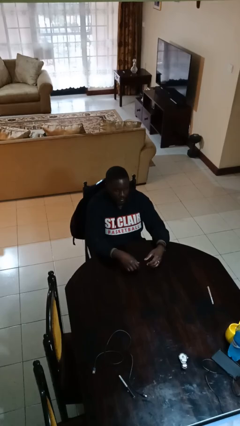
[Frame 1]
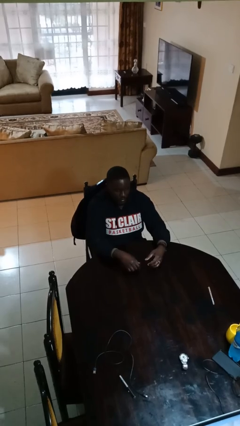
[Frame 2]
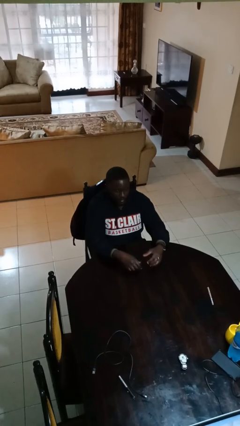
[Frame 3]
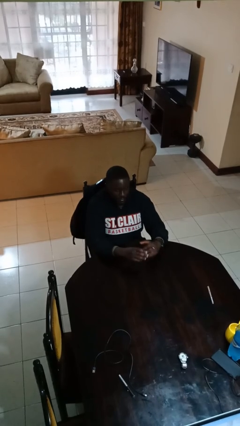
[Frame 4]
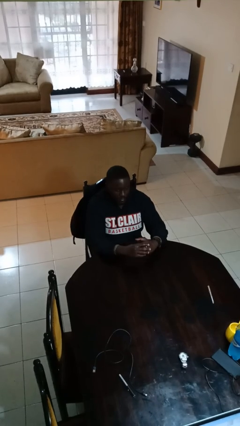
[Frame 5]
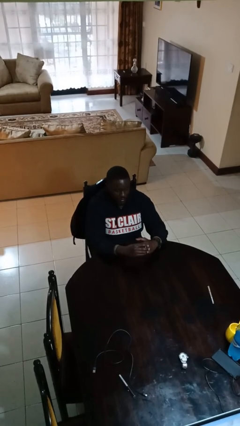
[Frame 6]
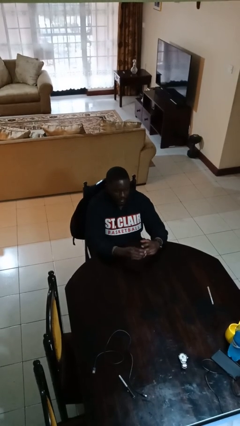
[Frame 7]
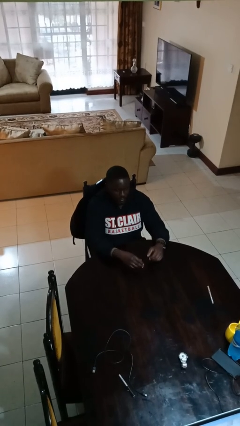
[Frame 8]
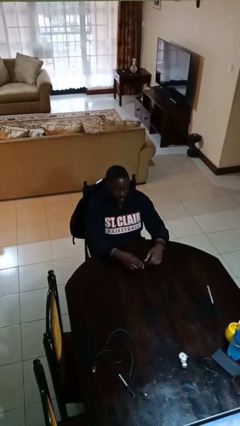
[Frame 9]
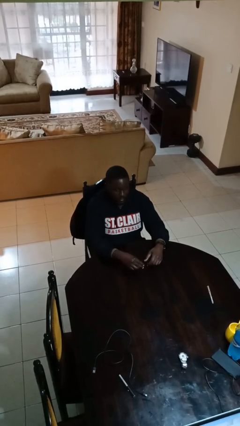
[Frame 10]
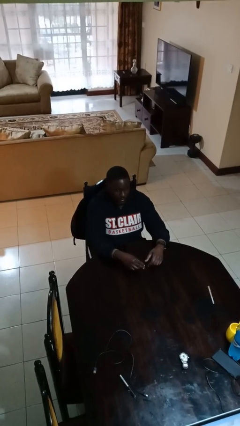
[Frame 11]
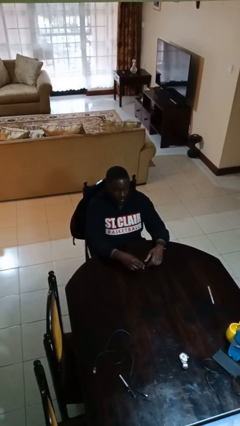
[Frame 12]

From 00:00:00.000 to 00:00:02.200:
person takes off ring

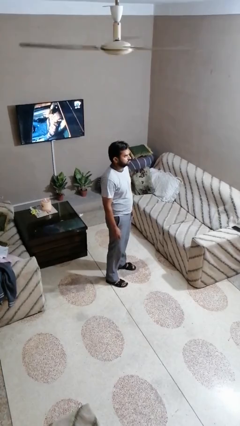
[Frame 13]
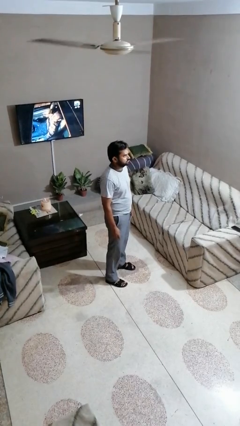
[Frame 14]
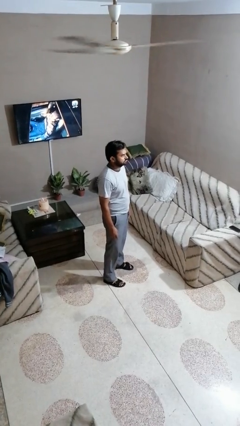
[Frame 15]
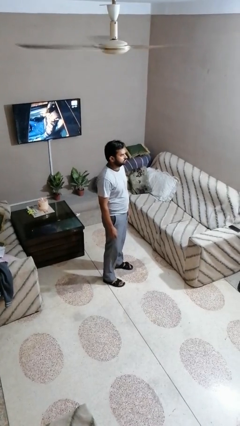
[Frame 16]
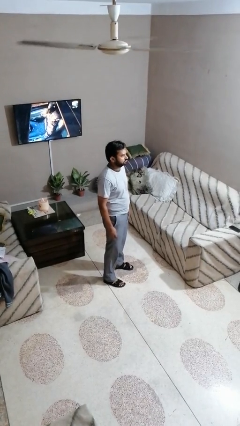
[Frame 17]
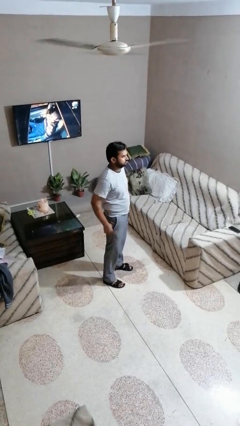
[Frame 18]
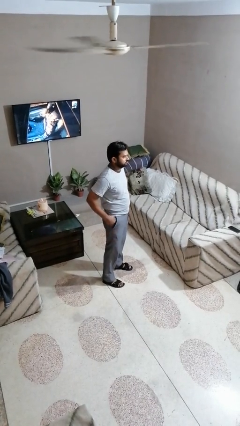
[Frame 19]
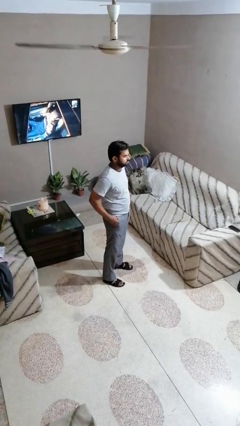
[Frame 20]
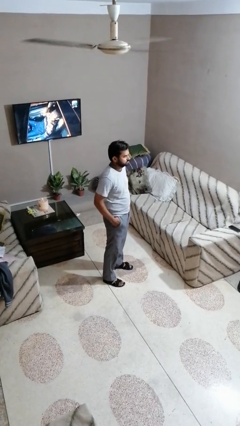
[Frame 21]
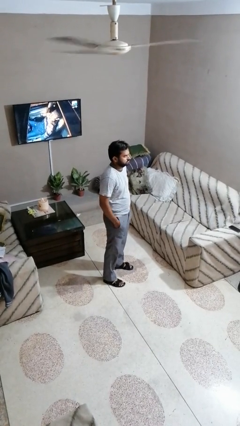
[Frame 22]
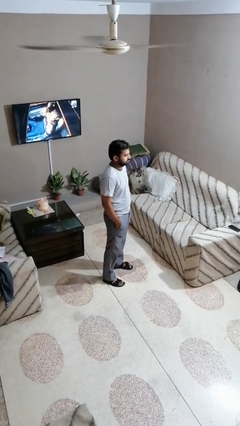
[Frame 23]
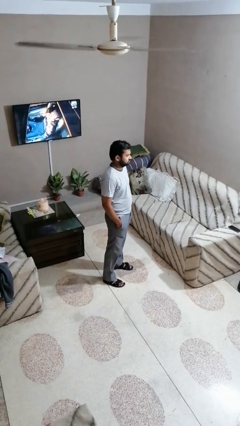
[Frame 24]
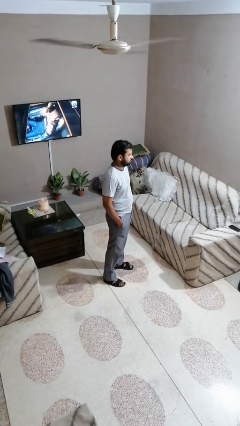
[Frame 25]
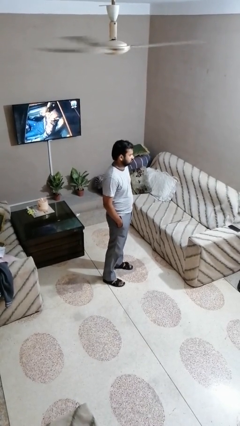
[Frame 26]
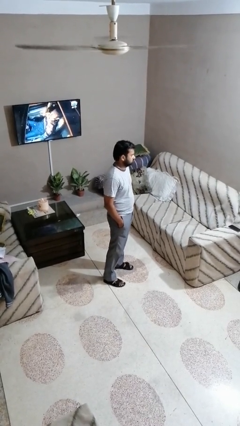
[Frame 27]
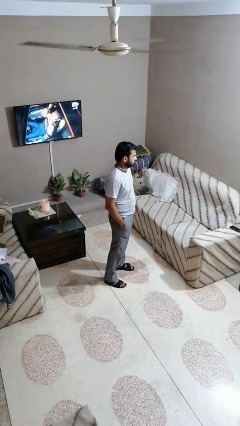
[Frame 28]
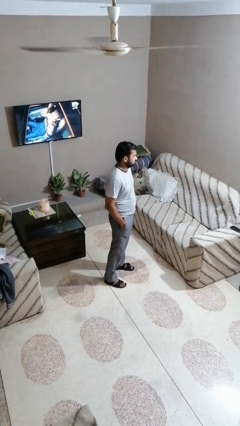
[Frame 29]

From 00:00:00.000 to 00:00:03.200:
person puts hands in back pockets

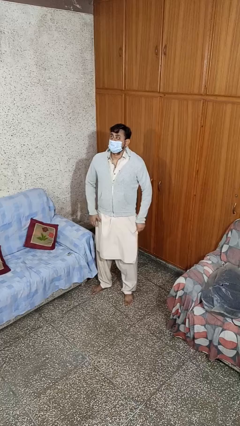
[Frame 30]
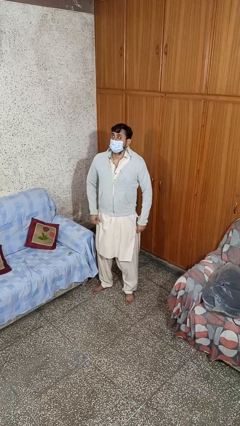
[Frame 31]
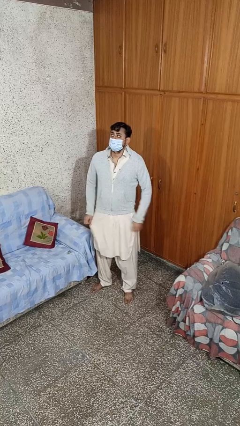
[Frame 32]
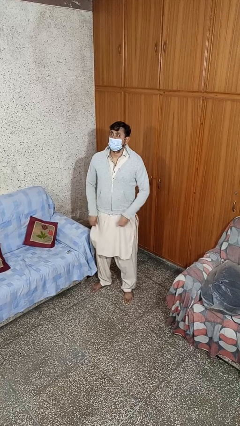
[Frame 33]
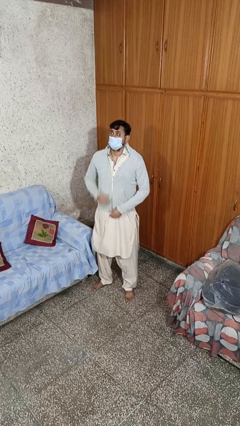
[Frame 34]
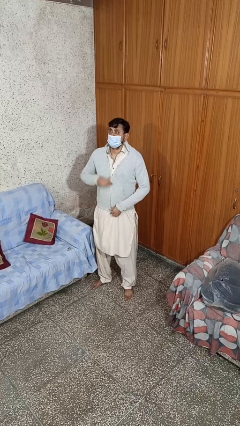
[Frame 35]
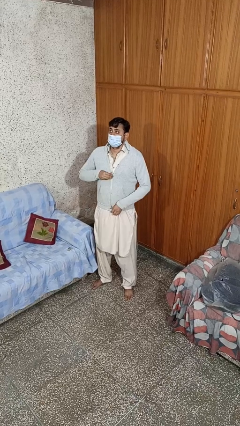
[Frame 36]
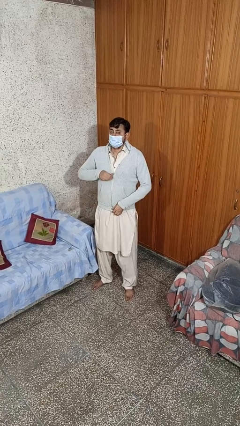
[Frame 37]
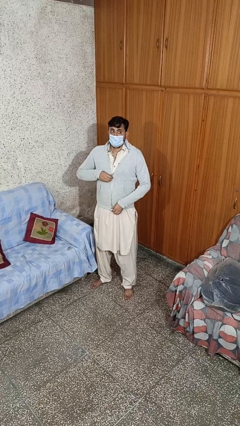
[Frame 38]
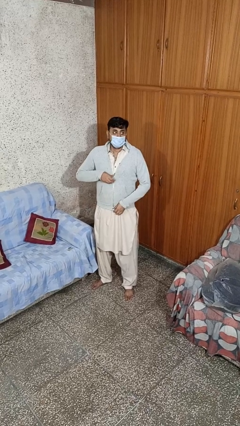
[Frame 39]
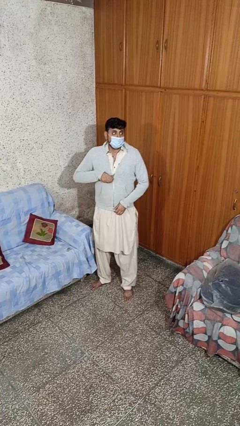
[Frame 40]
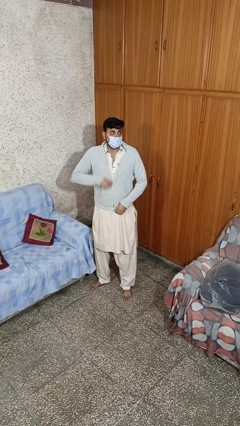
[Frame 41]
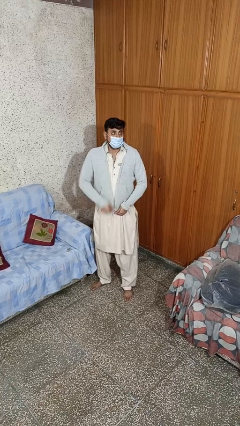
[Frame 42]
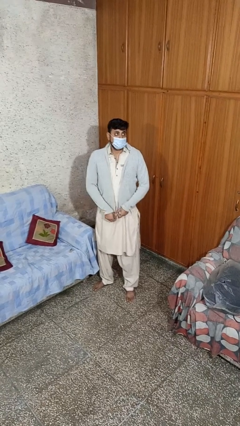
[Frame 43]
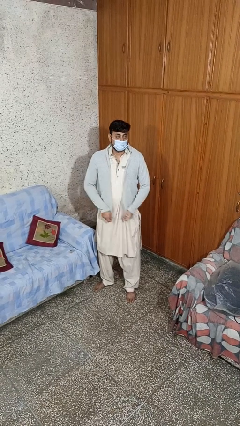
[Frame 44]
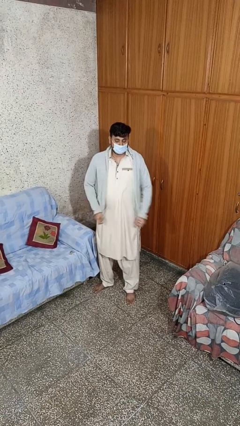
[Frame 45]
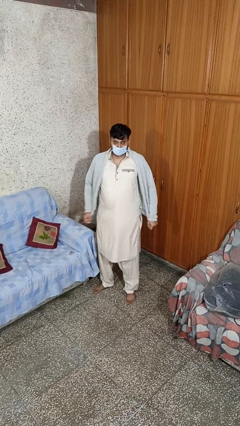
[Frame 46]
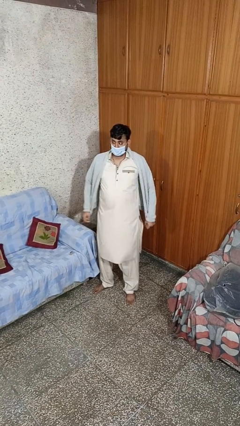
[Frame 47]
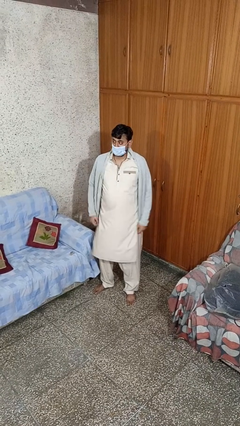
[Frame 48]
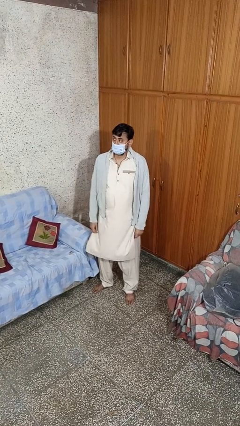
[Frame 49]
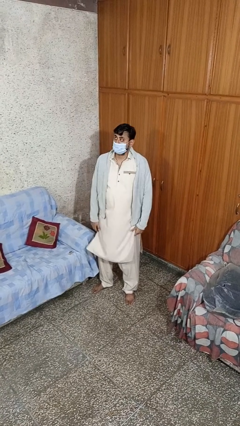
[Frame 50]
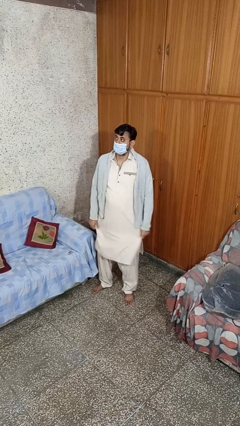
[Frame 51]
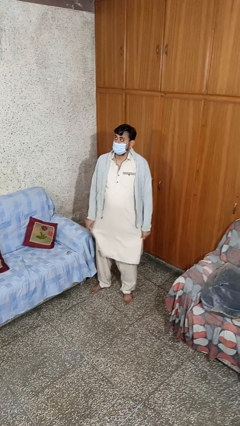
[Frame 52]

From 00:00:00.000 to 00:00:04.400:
person unzips jacket

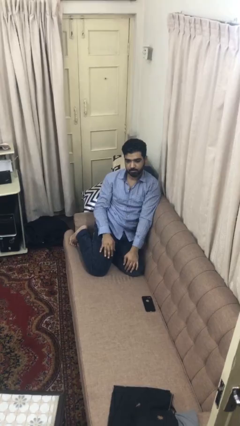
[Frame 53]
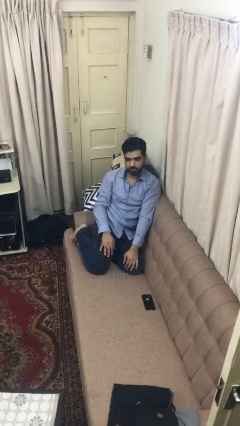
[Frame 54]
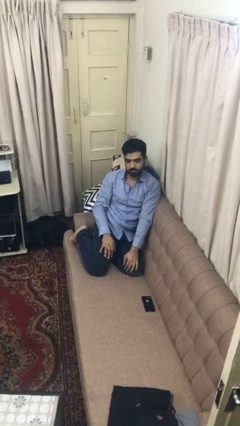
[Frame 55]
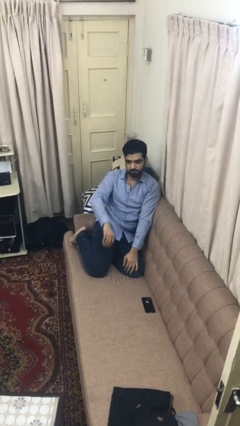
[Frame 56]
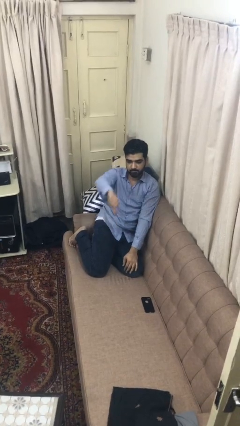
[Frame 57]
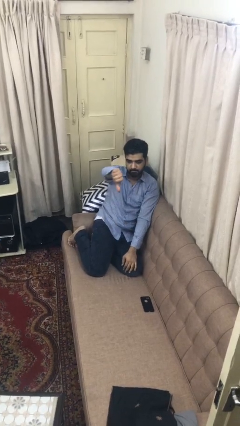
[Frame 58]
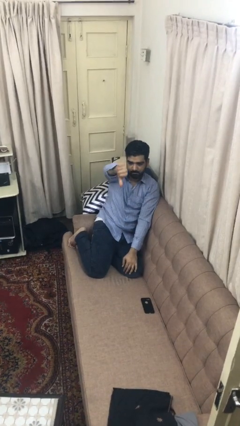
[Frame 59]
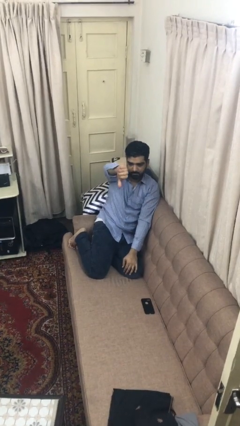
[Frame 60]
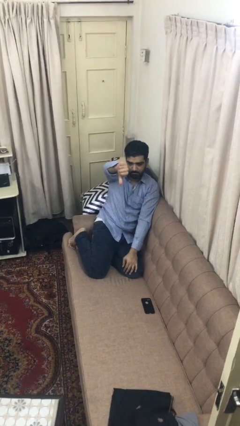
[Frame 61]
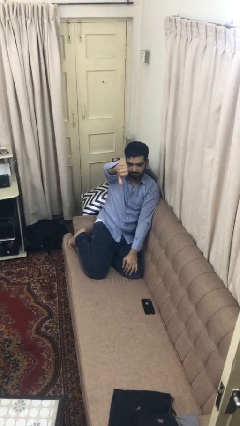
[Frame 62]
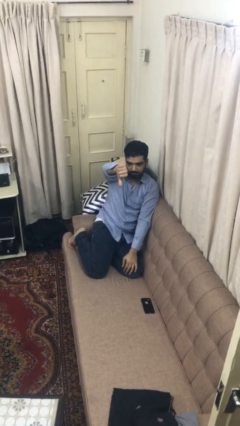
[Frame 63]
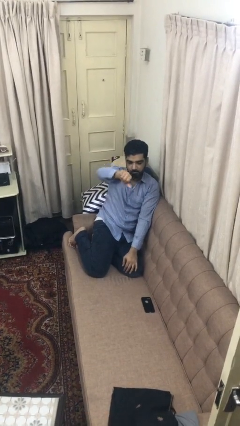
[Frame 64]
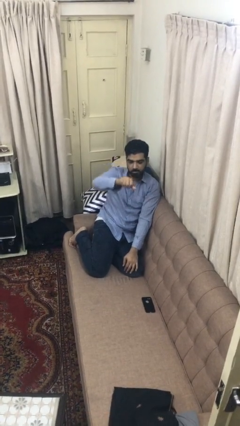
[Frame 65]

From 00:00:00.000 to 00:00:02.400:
person gestures thumbs down

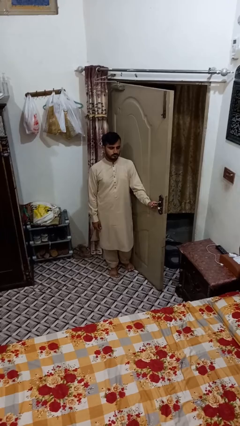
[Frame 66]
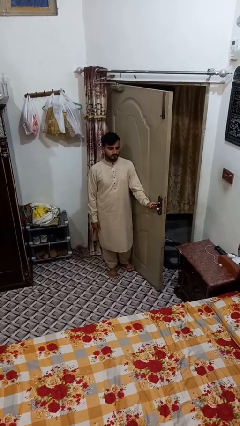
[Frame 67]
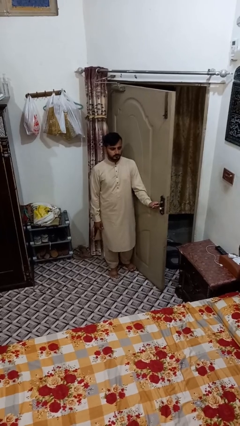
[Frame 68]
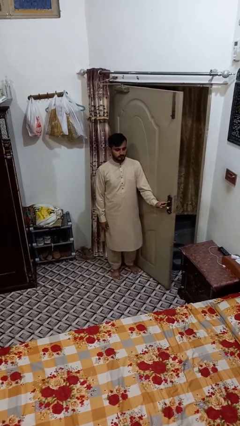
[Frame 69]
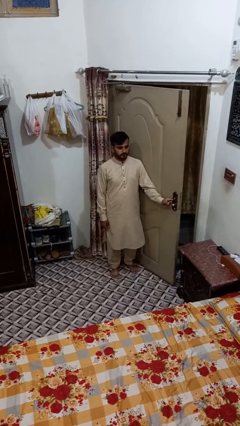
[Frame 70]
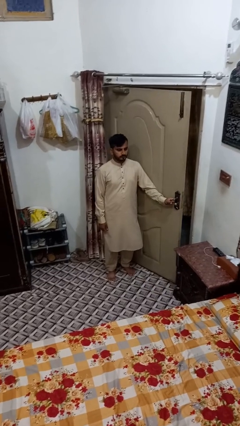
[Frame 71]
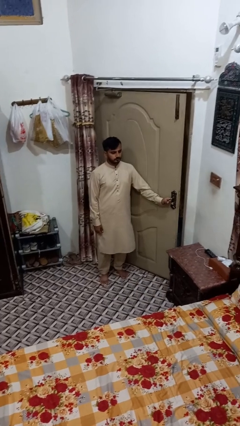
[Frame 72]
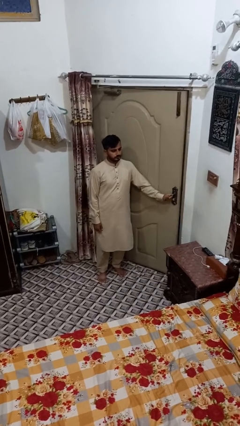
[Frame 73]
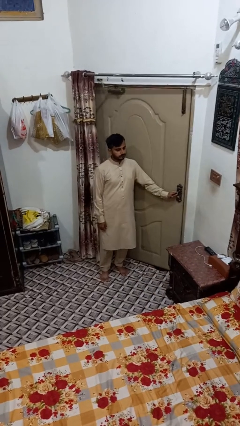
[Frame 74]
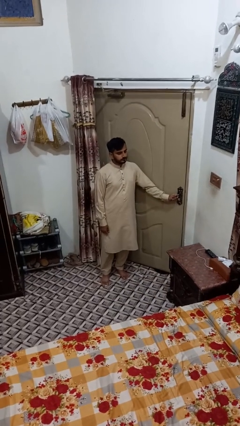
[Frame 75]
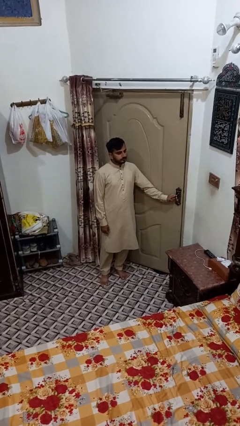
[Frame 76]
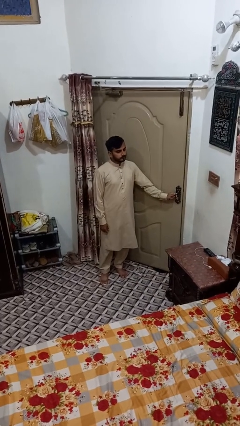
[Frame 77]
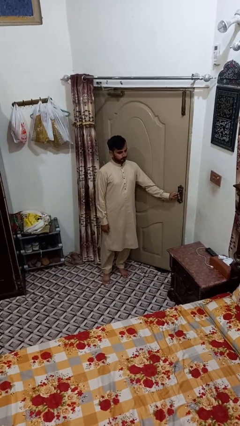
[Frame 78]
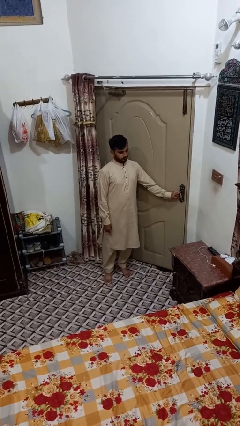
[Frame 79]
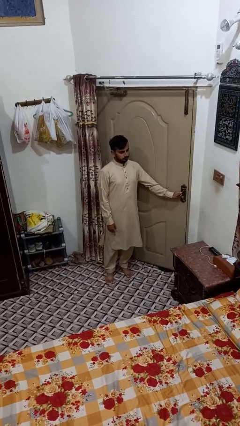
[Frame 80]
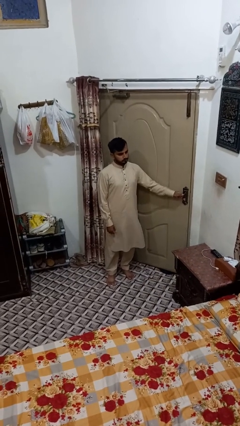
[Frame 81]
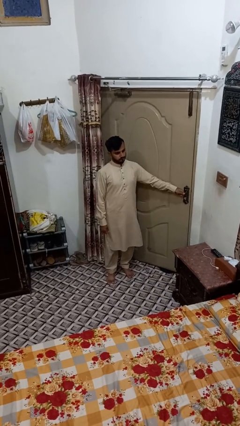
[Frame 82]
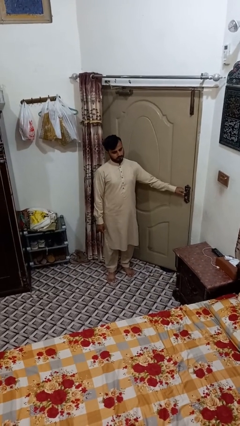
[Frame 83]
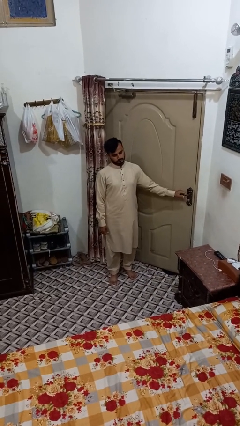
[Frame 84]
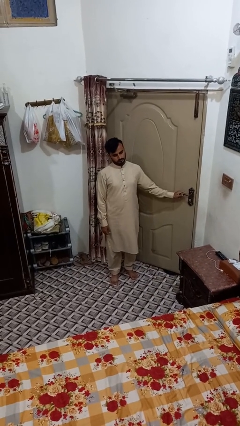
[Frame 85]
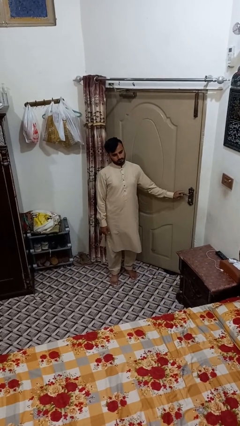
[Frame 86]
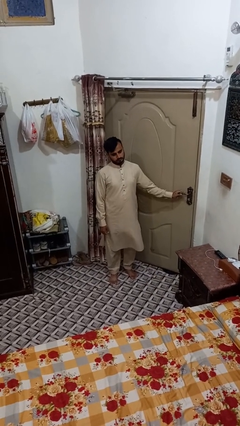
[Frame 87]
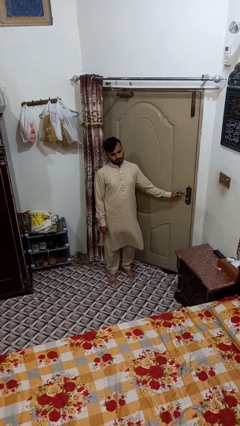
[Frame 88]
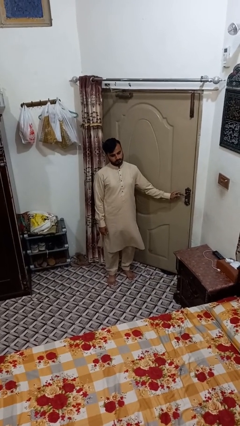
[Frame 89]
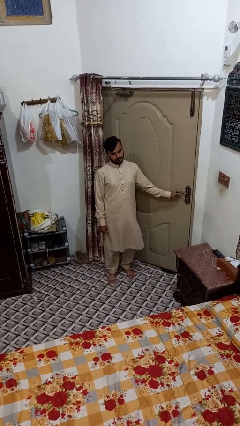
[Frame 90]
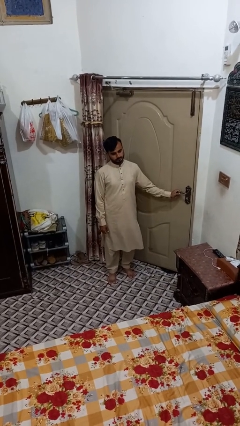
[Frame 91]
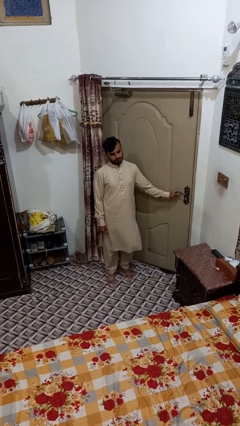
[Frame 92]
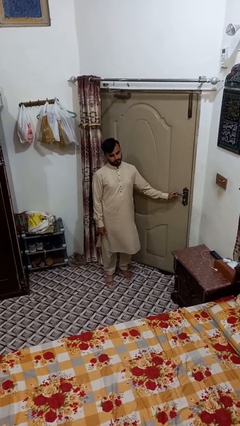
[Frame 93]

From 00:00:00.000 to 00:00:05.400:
person closes closet door

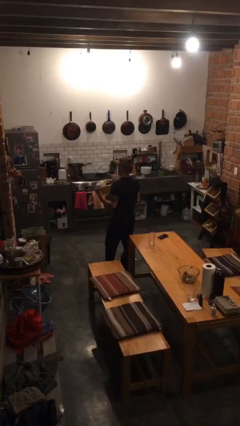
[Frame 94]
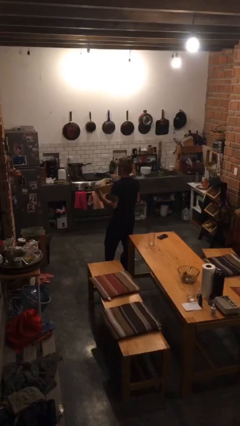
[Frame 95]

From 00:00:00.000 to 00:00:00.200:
person holds object above head
